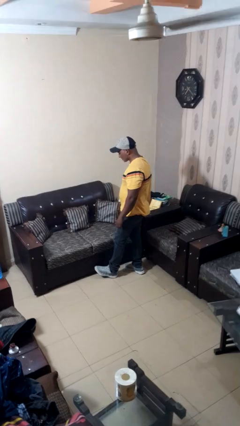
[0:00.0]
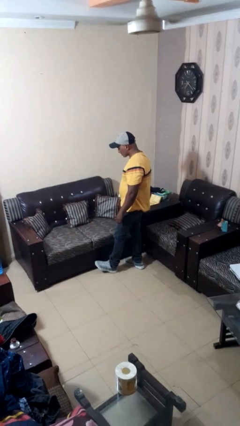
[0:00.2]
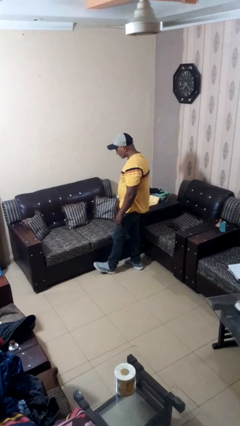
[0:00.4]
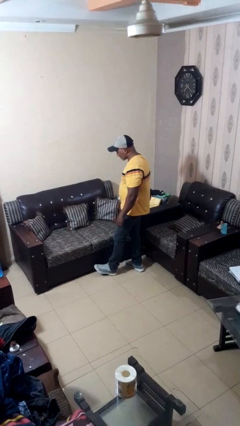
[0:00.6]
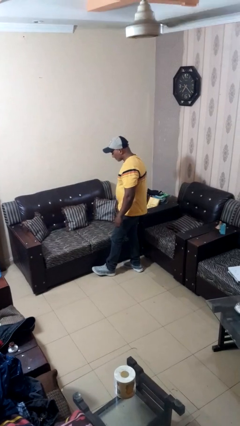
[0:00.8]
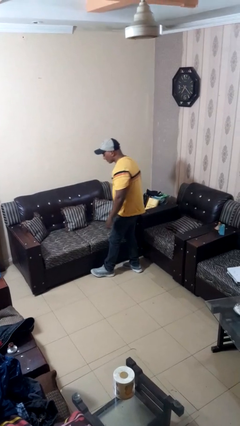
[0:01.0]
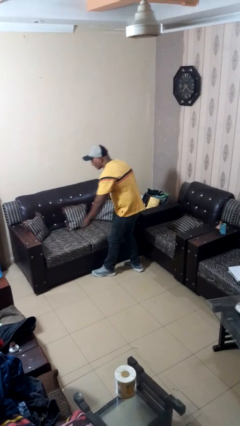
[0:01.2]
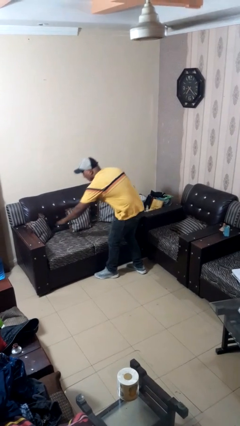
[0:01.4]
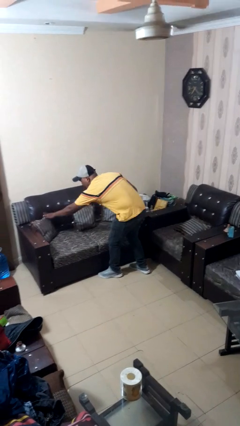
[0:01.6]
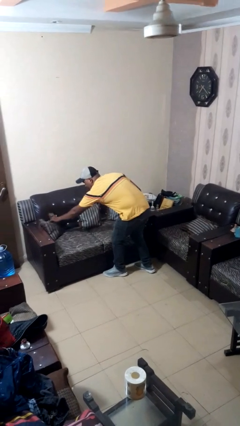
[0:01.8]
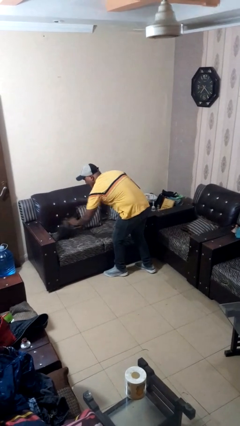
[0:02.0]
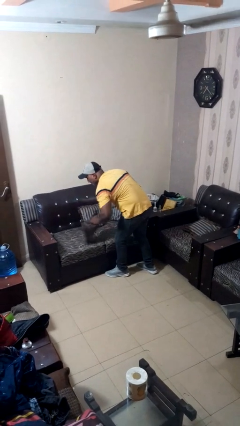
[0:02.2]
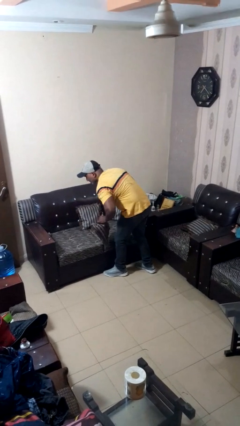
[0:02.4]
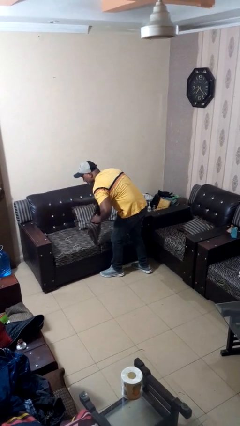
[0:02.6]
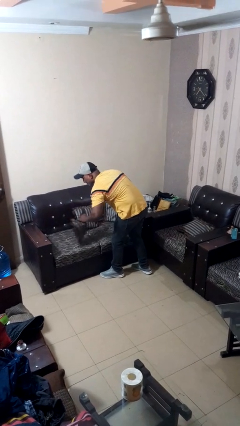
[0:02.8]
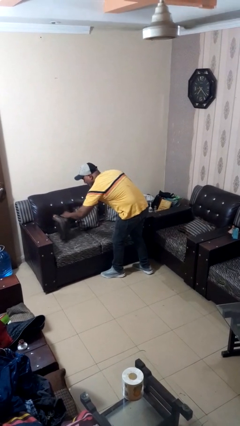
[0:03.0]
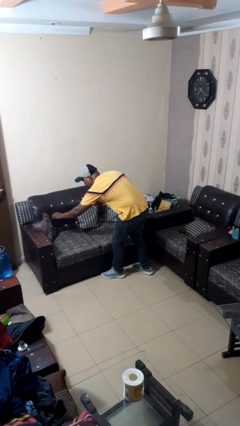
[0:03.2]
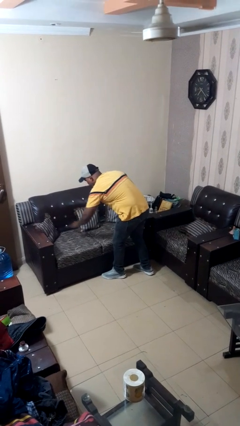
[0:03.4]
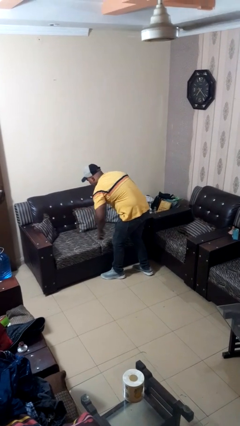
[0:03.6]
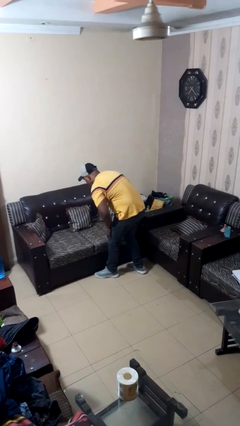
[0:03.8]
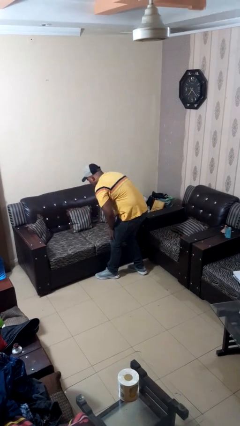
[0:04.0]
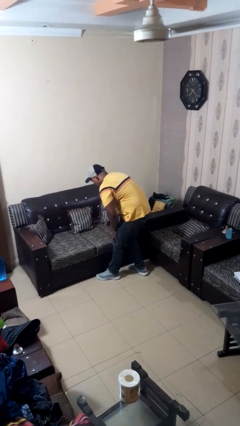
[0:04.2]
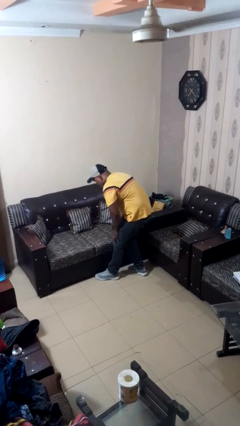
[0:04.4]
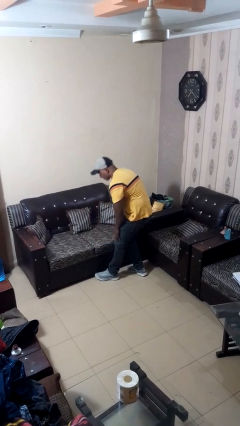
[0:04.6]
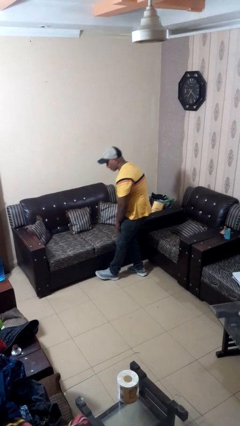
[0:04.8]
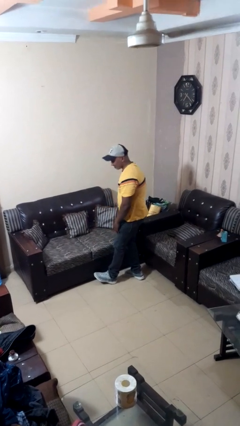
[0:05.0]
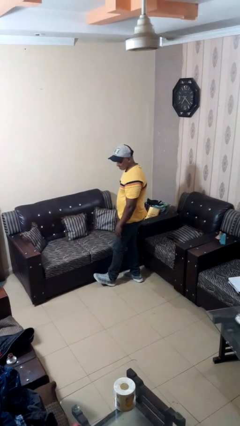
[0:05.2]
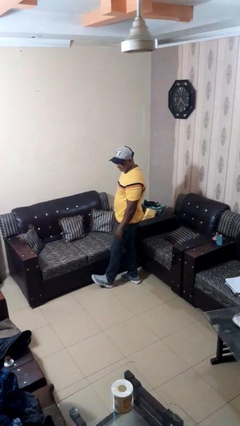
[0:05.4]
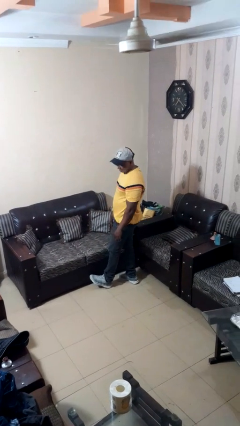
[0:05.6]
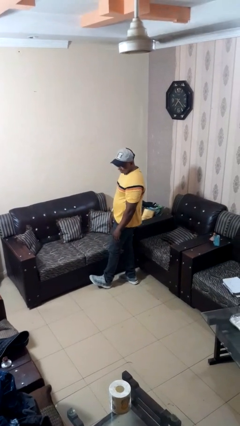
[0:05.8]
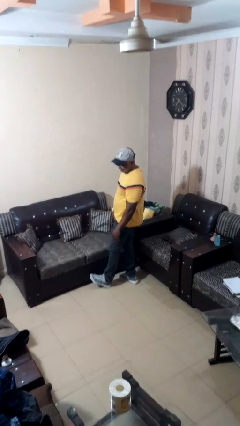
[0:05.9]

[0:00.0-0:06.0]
person searches in couch

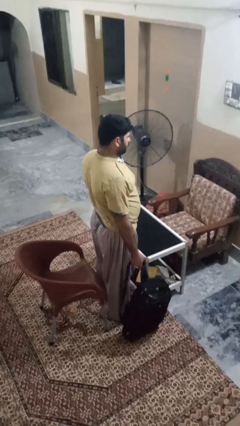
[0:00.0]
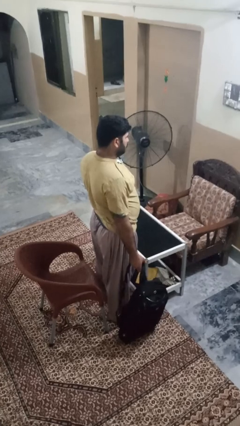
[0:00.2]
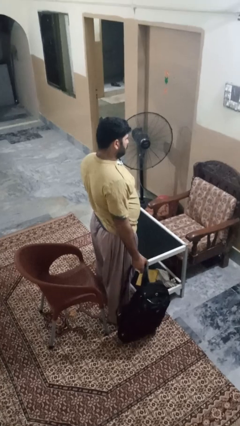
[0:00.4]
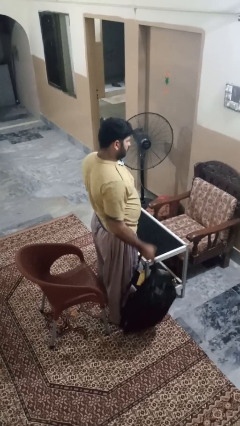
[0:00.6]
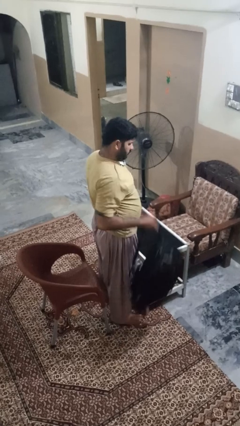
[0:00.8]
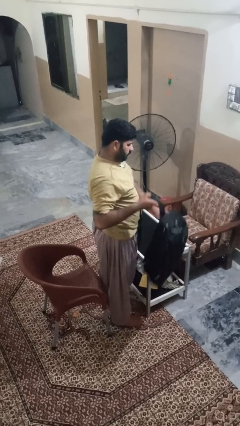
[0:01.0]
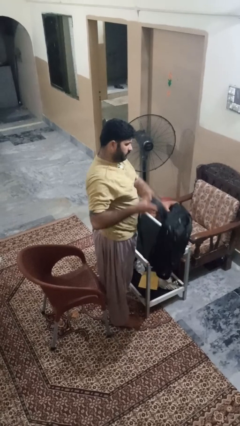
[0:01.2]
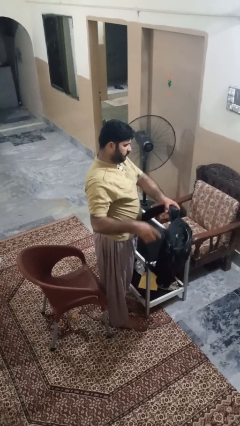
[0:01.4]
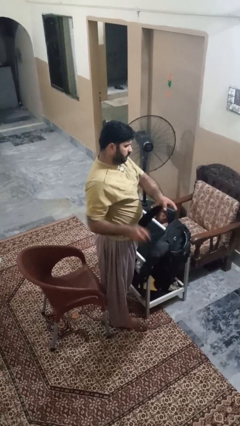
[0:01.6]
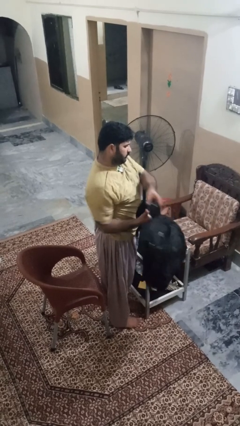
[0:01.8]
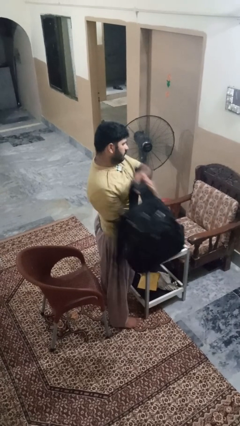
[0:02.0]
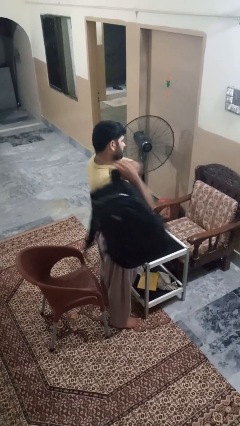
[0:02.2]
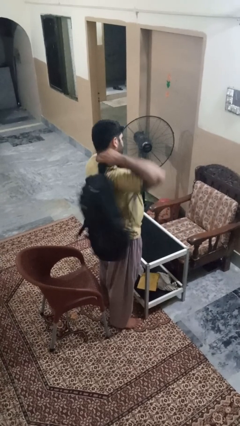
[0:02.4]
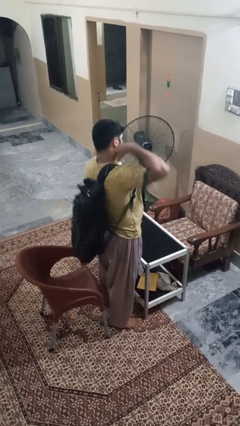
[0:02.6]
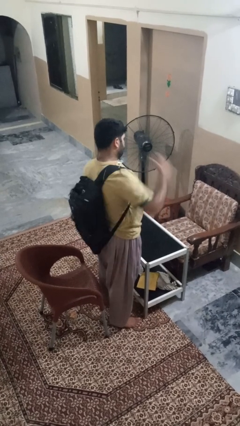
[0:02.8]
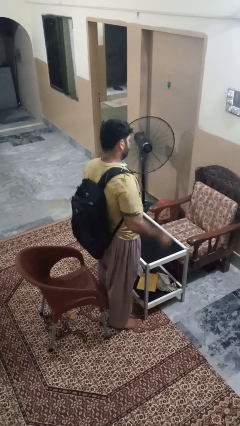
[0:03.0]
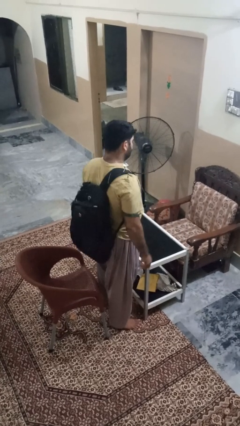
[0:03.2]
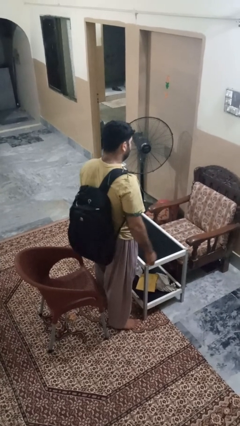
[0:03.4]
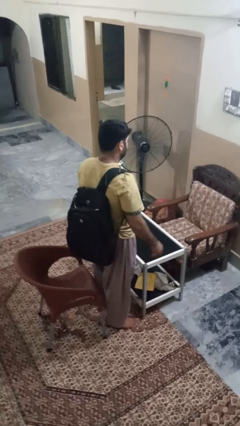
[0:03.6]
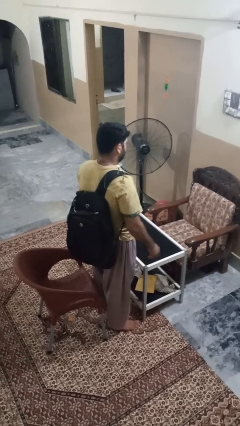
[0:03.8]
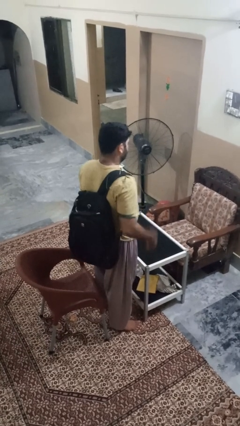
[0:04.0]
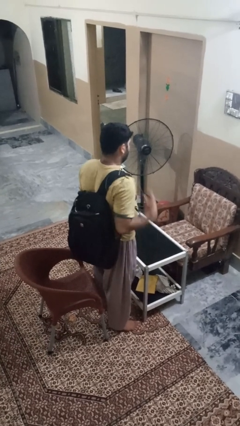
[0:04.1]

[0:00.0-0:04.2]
person puts on backpack

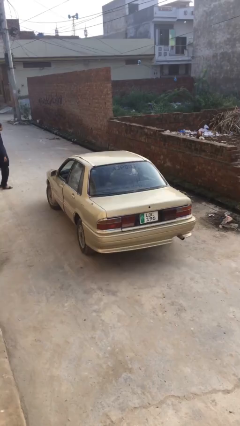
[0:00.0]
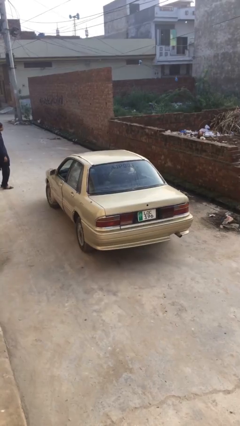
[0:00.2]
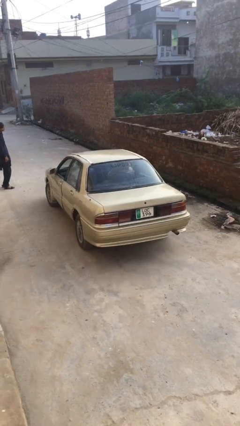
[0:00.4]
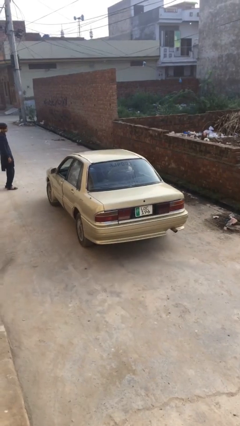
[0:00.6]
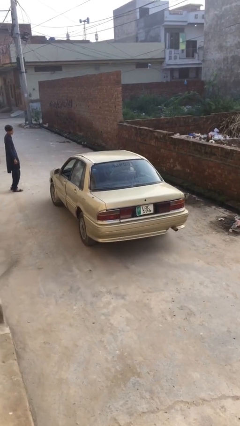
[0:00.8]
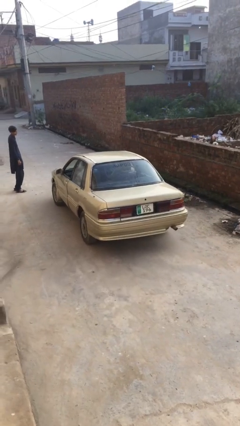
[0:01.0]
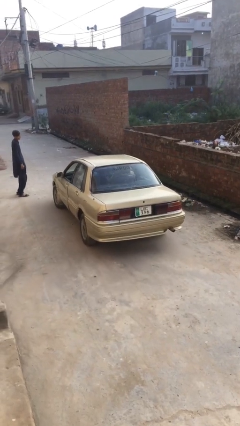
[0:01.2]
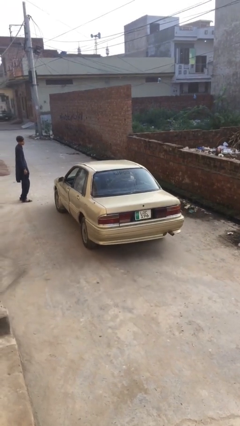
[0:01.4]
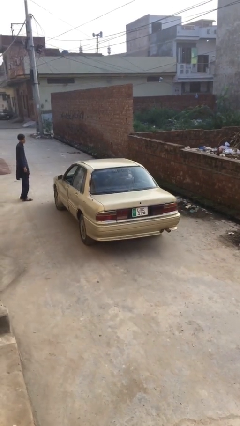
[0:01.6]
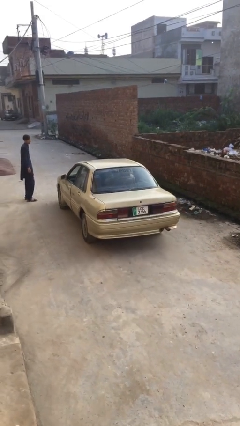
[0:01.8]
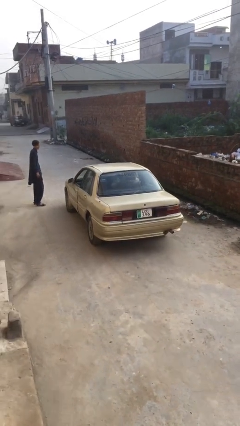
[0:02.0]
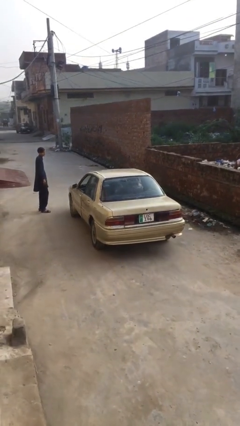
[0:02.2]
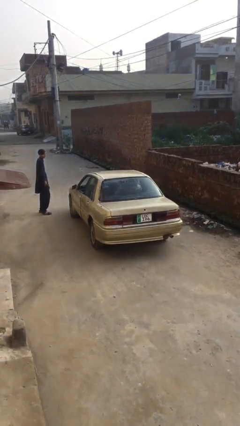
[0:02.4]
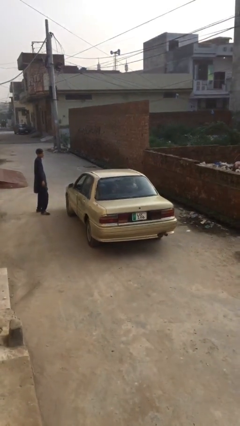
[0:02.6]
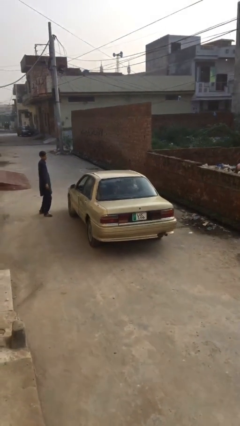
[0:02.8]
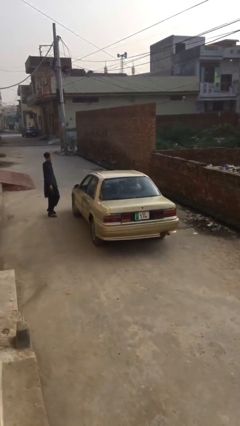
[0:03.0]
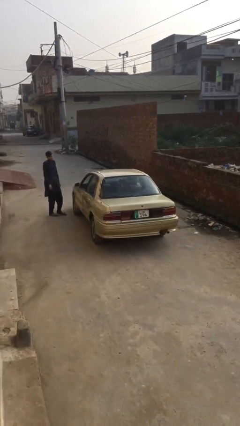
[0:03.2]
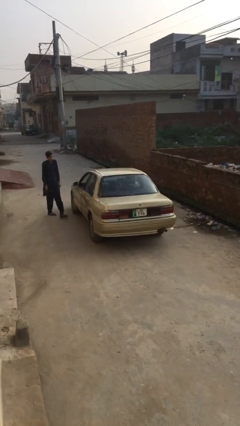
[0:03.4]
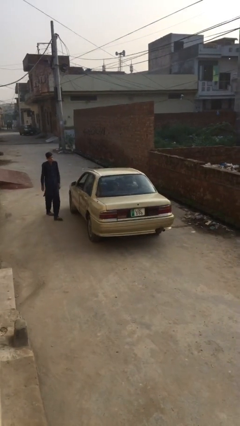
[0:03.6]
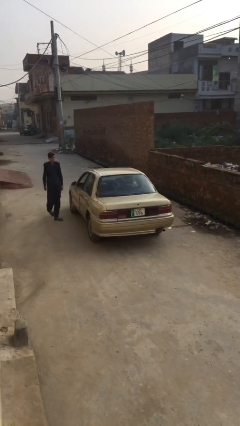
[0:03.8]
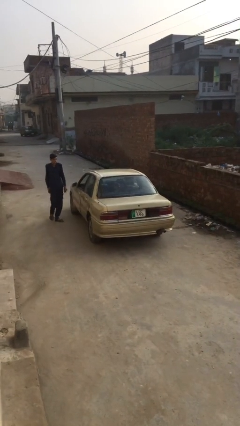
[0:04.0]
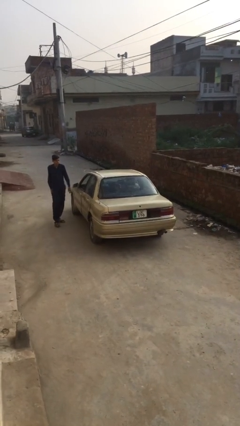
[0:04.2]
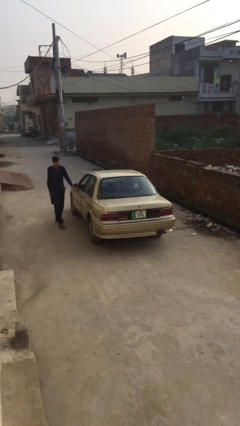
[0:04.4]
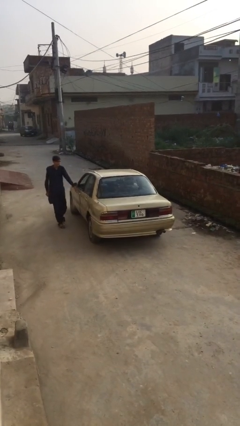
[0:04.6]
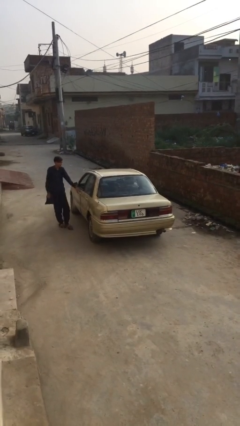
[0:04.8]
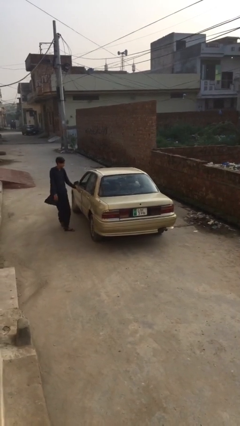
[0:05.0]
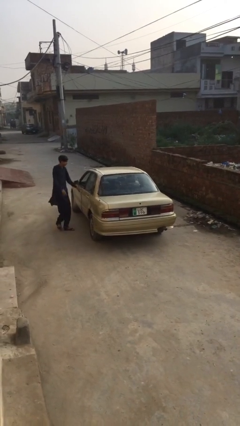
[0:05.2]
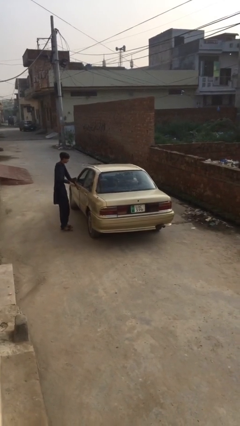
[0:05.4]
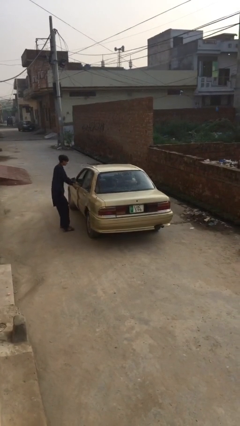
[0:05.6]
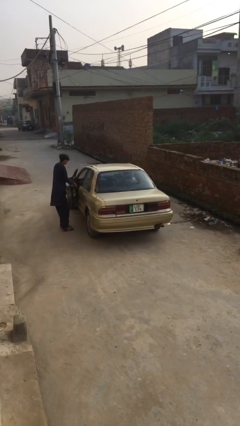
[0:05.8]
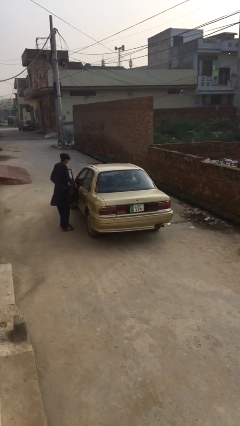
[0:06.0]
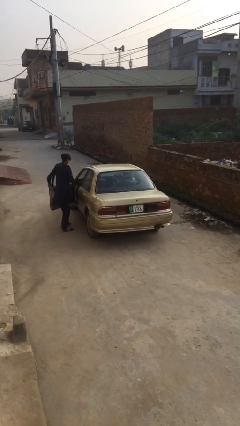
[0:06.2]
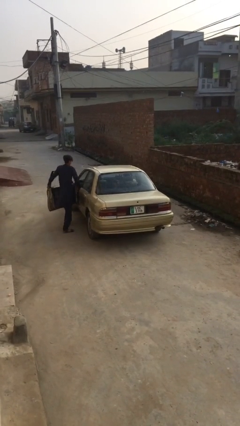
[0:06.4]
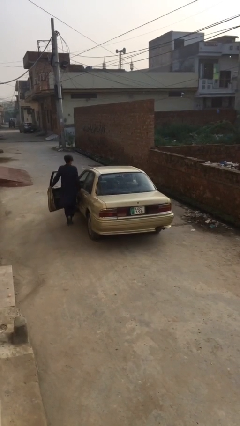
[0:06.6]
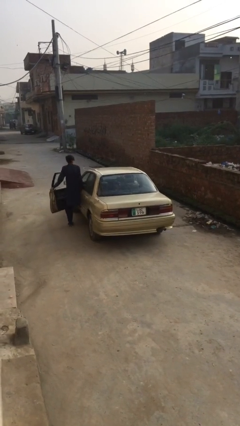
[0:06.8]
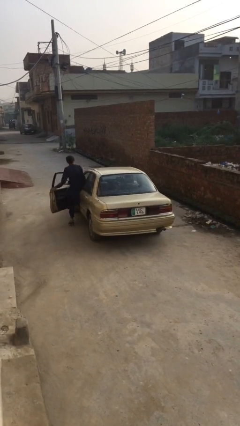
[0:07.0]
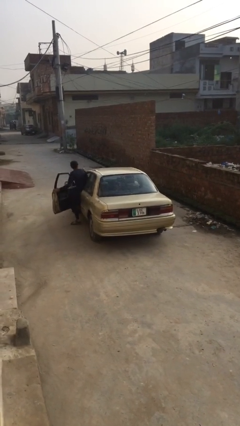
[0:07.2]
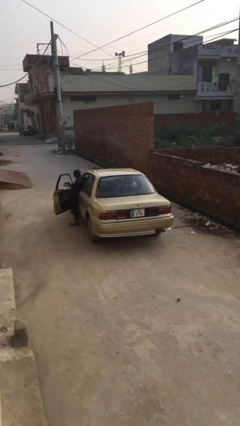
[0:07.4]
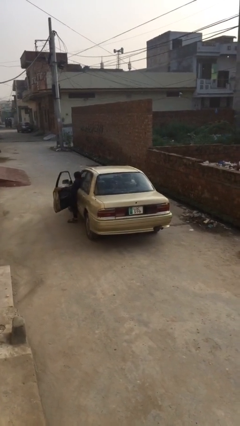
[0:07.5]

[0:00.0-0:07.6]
car picks up person

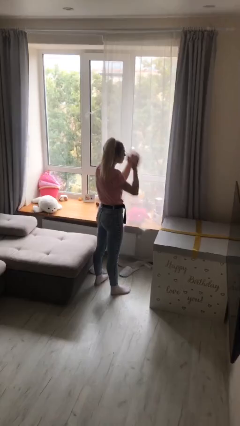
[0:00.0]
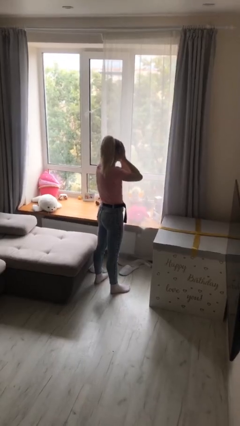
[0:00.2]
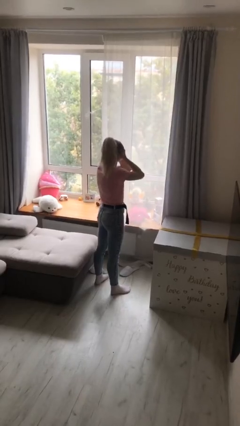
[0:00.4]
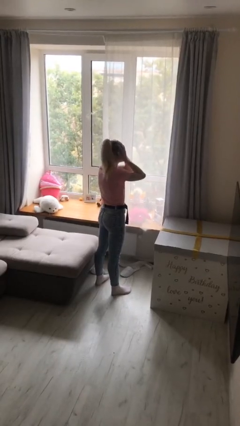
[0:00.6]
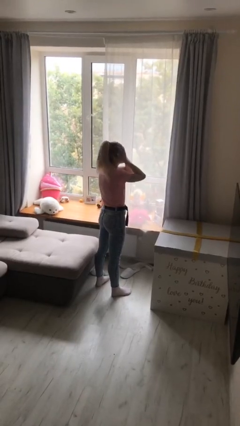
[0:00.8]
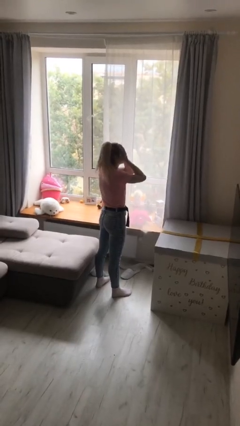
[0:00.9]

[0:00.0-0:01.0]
person covers face with hands
